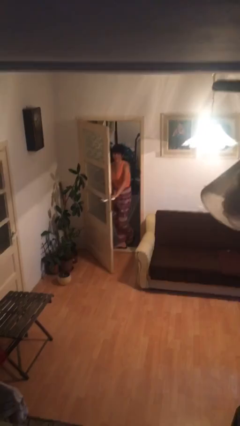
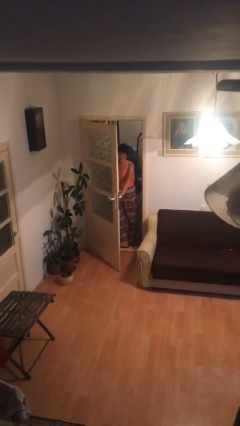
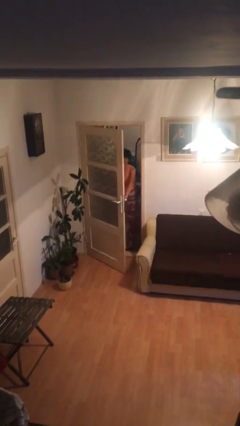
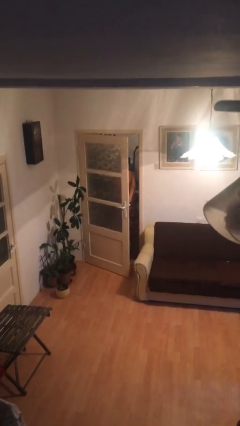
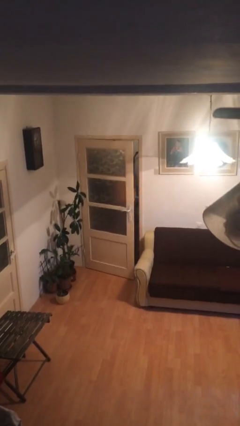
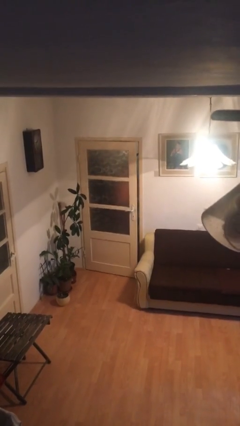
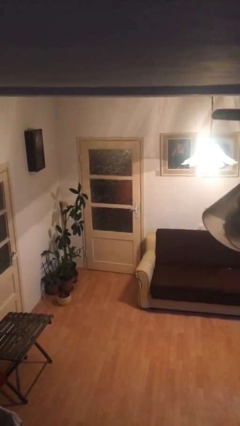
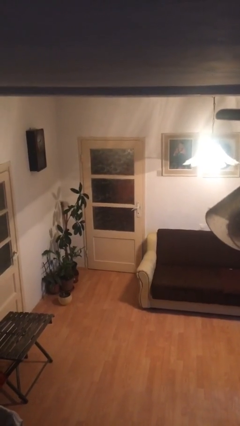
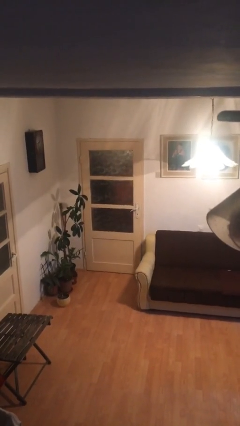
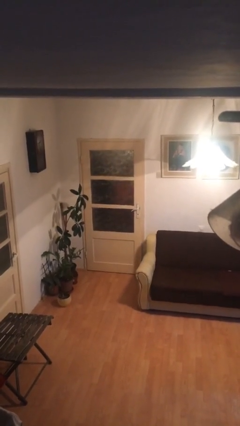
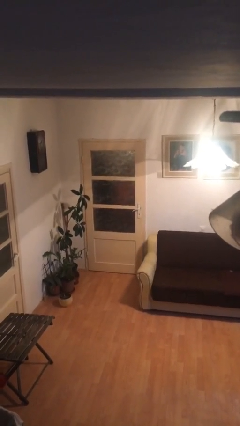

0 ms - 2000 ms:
person closes facility door

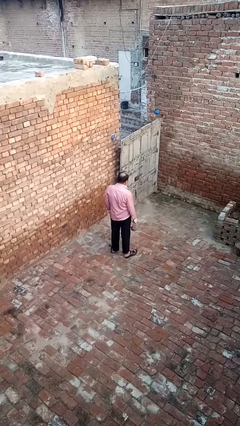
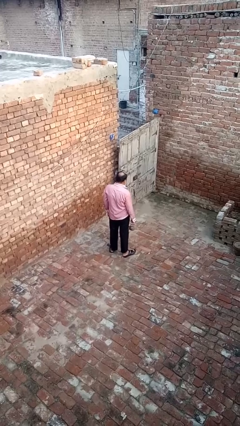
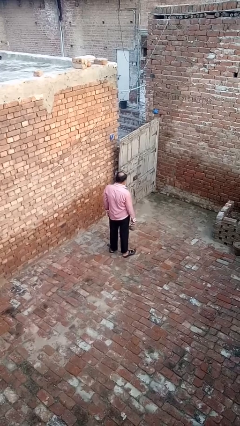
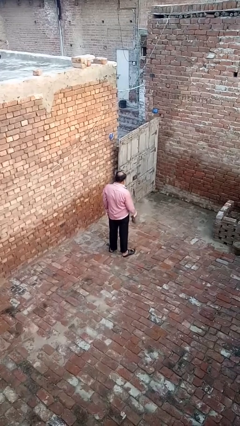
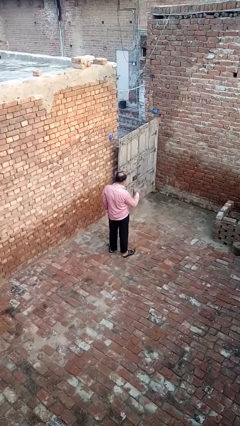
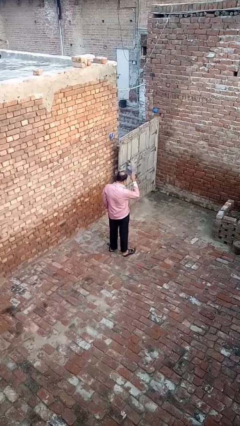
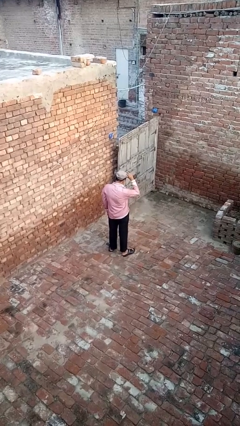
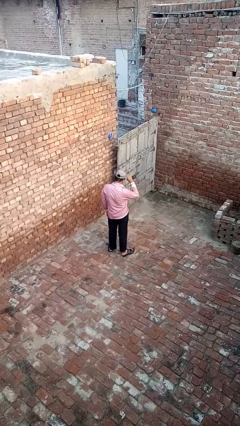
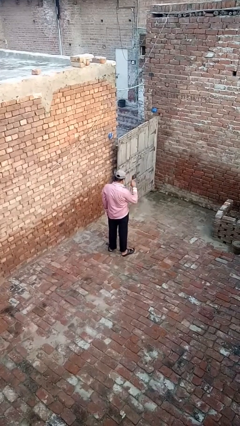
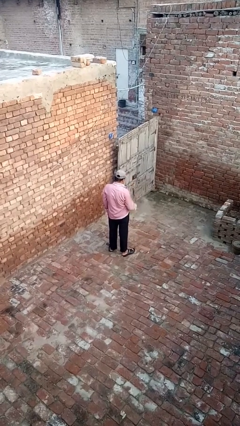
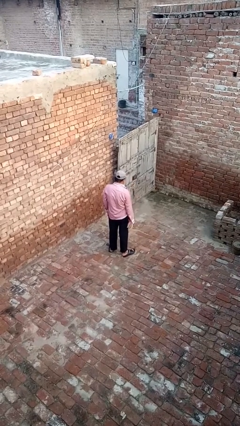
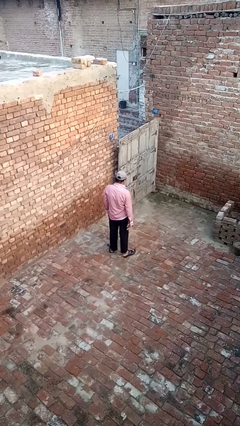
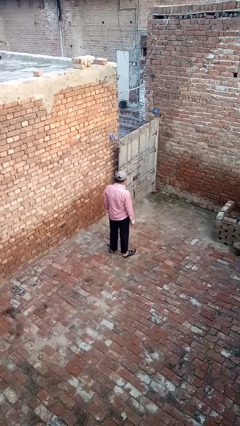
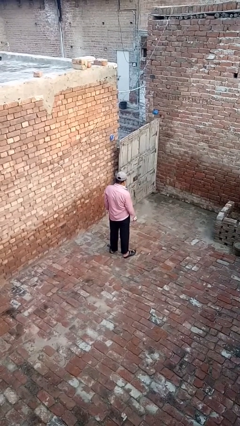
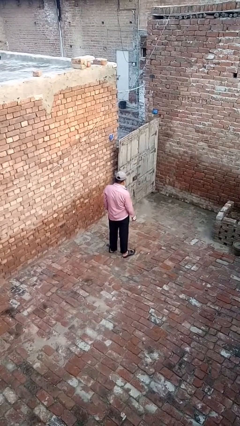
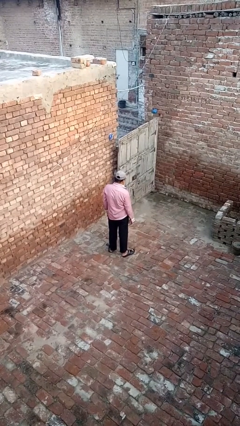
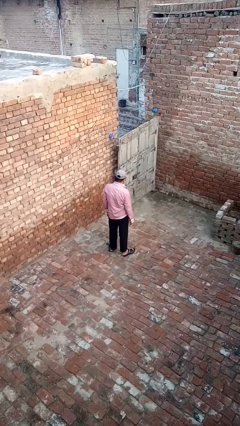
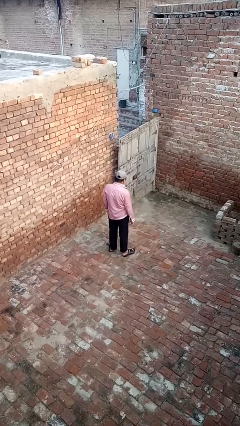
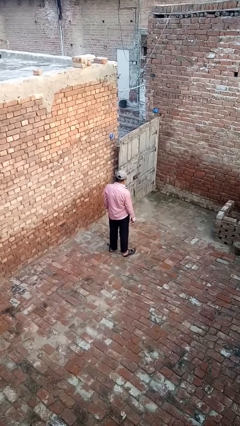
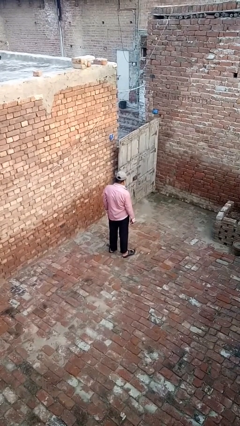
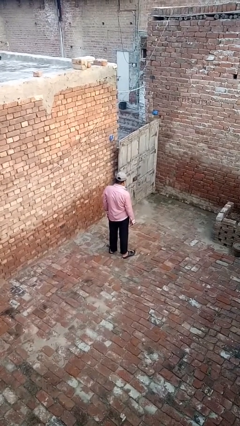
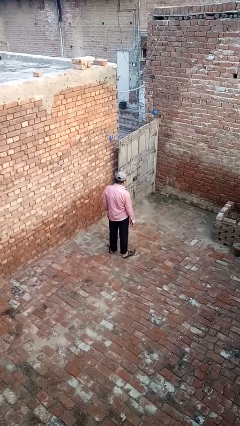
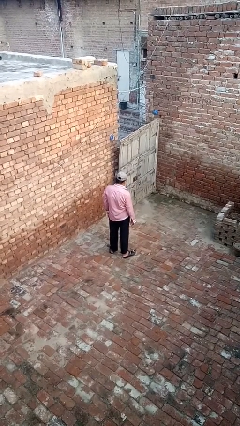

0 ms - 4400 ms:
person puts on hat

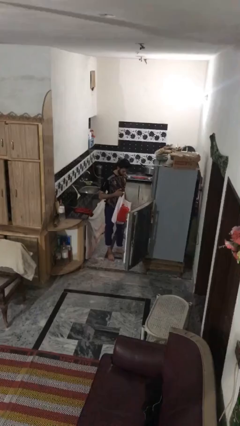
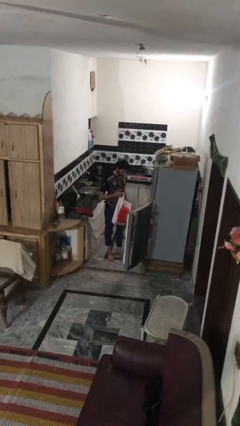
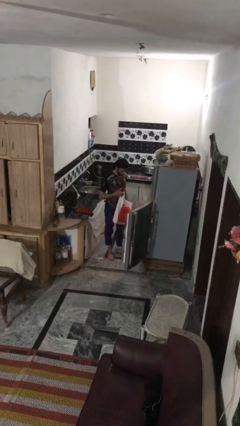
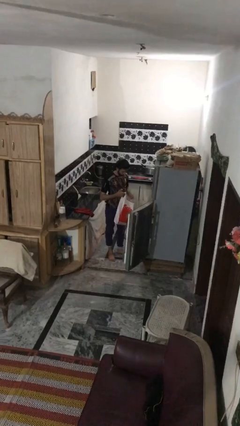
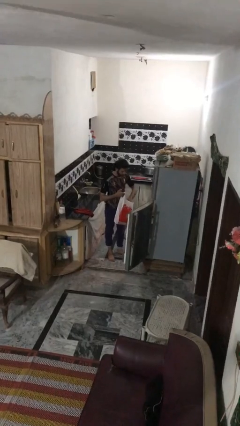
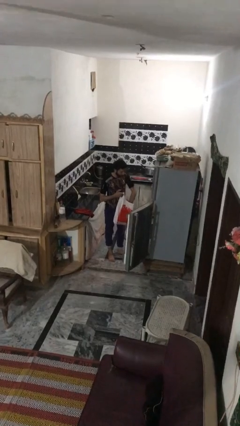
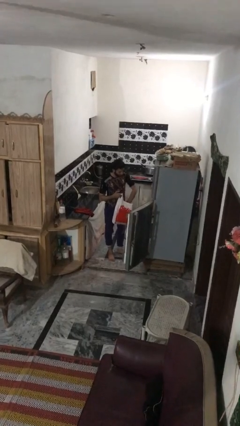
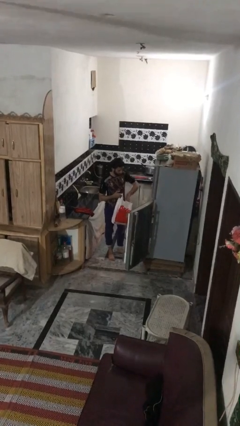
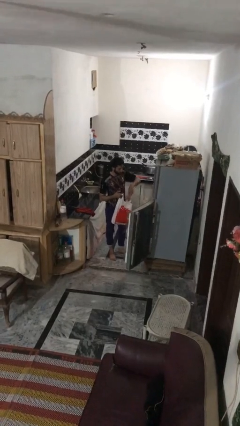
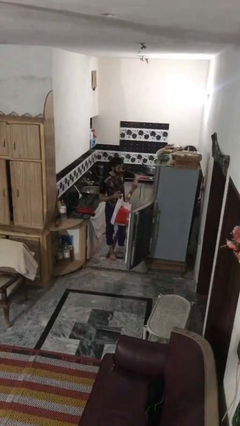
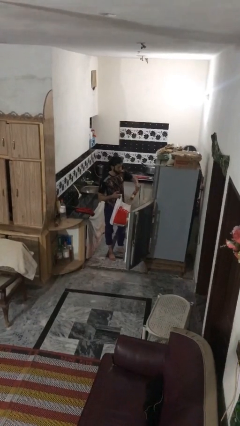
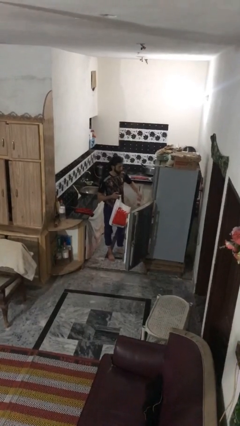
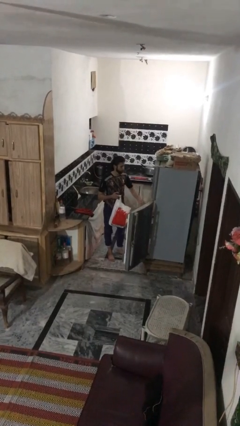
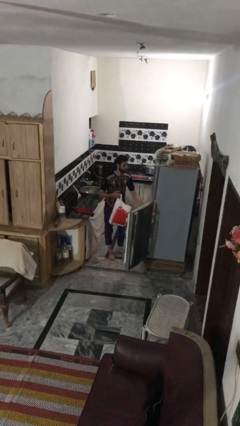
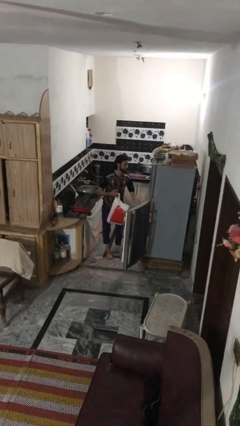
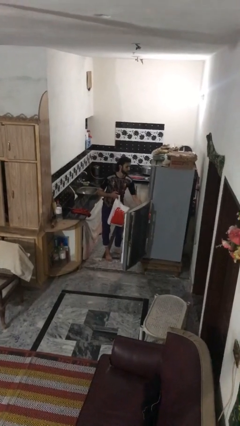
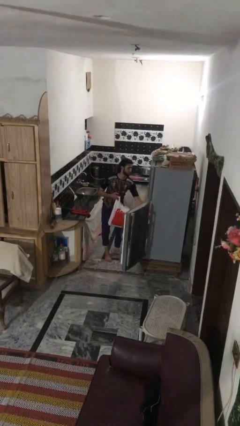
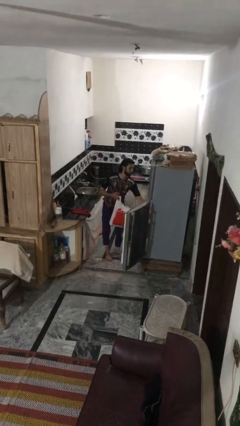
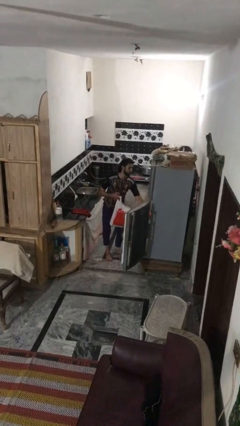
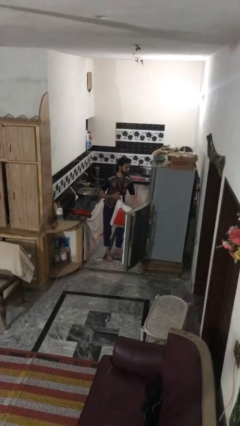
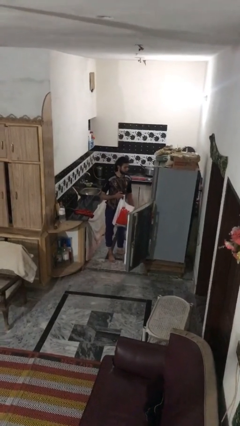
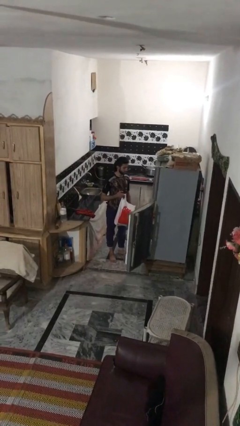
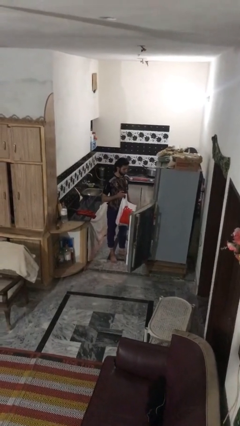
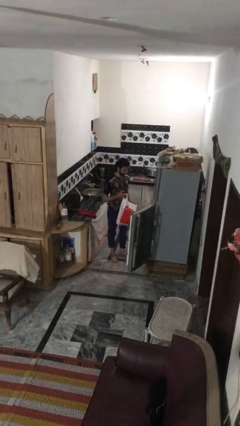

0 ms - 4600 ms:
person loads groceries into refrigerator

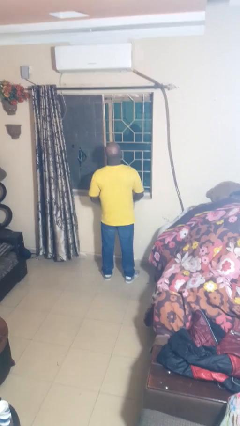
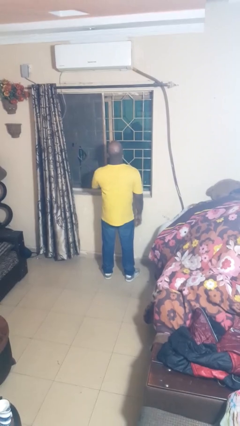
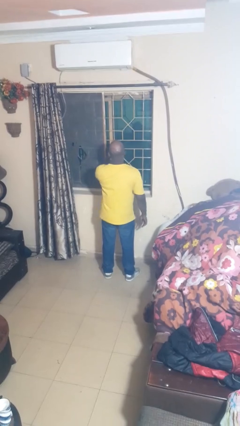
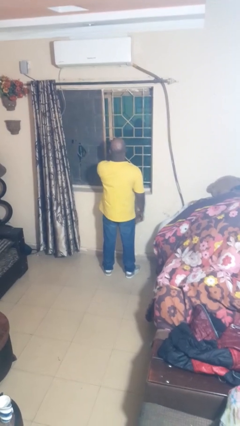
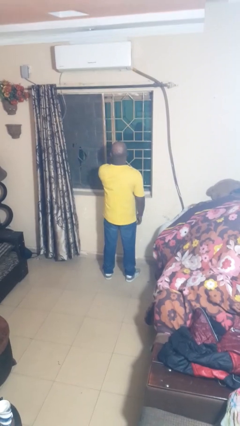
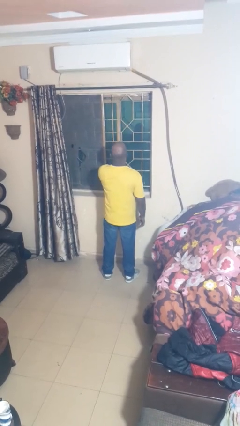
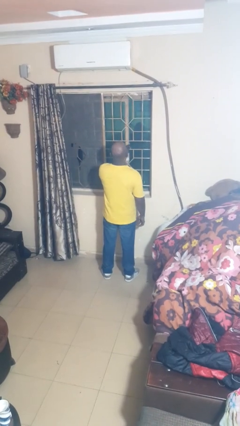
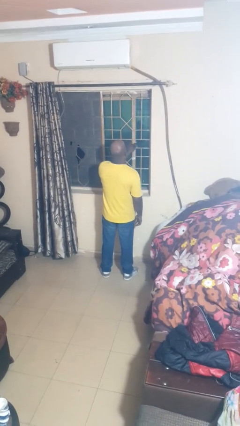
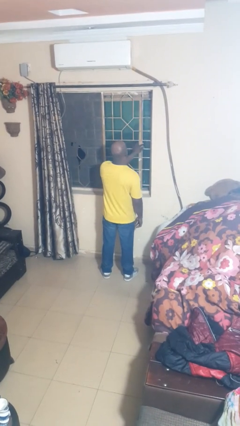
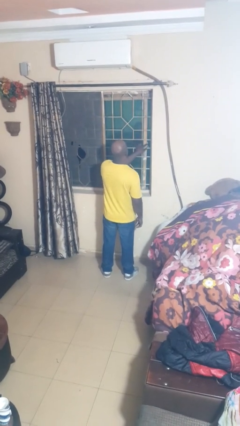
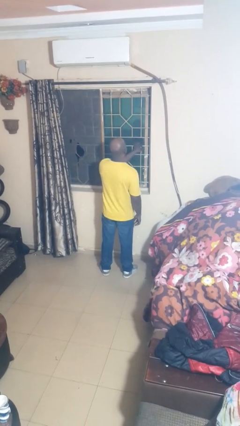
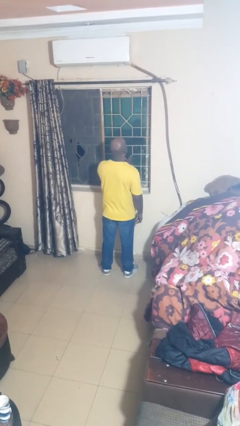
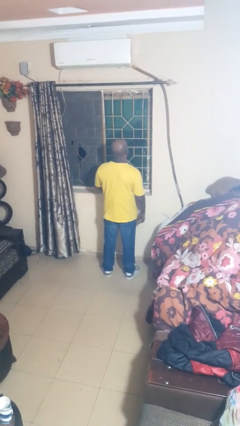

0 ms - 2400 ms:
person closes home window

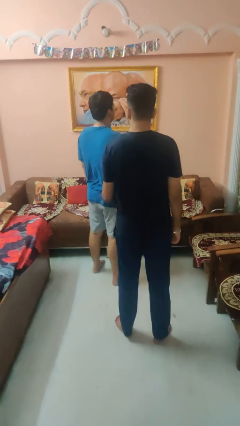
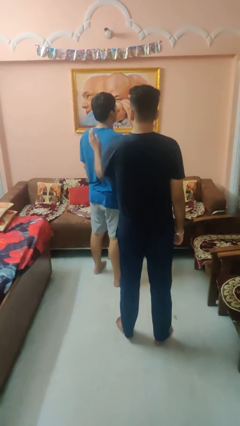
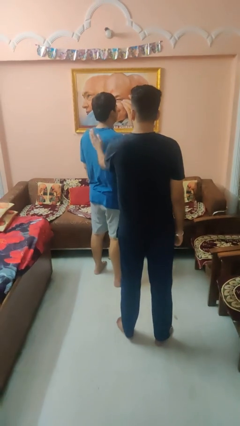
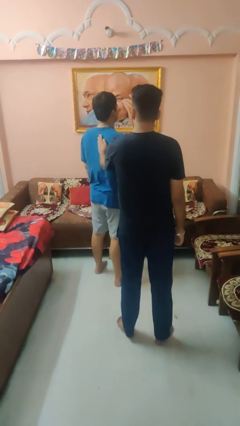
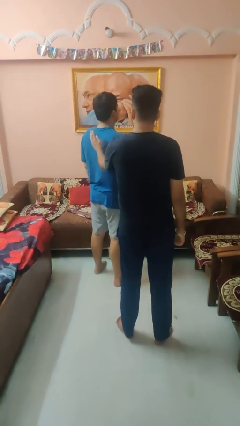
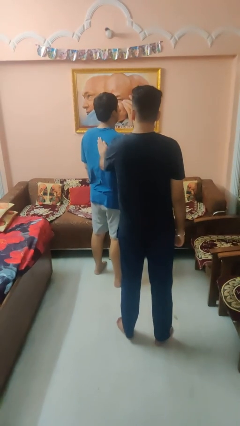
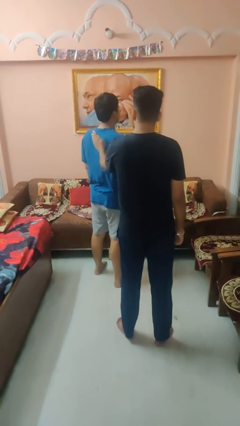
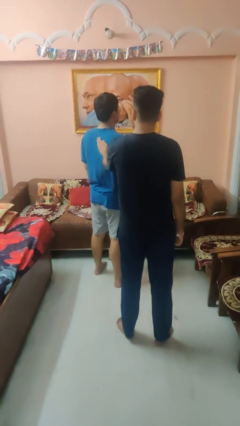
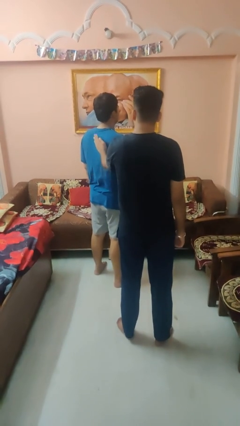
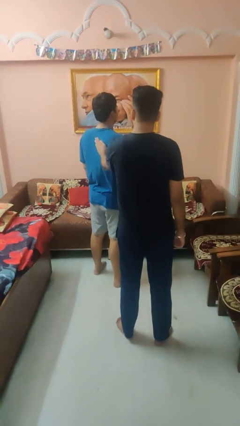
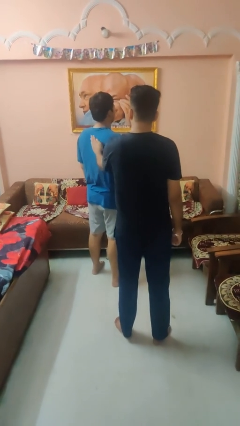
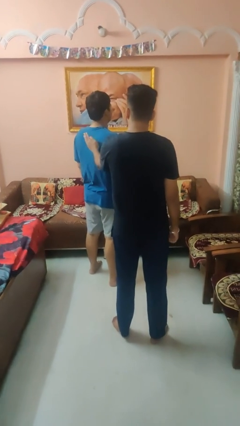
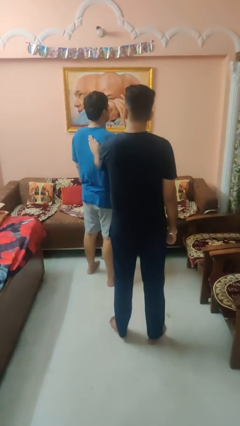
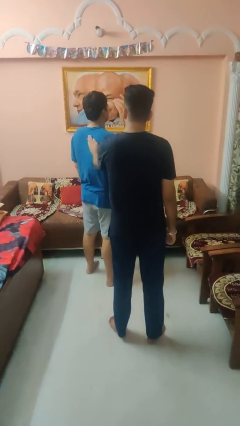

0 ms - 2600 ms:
person touches back of person

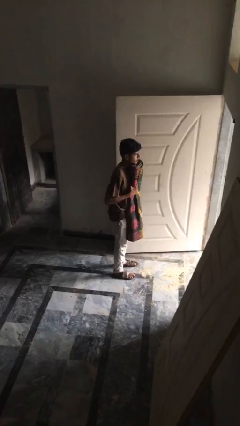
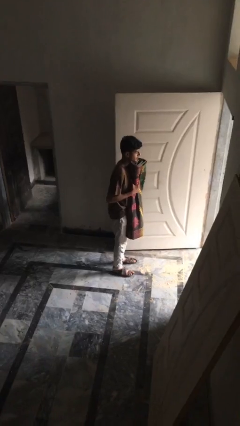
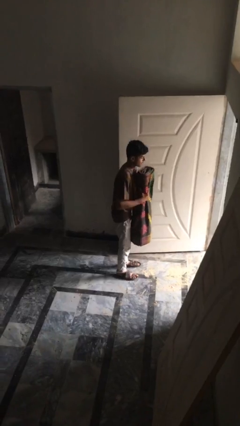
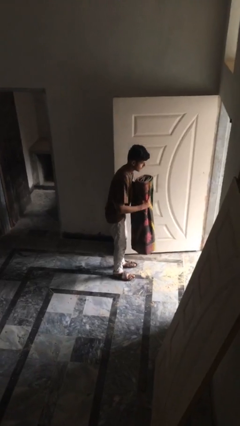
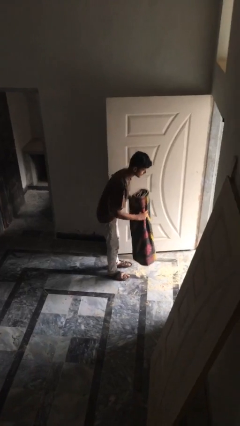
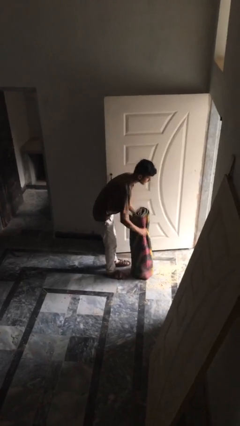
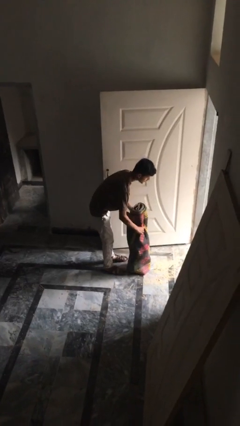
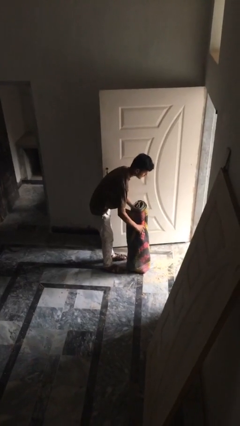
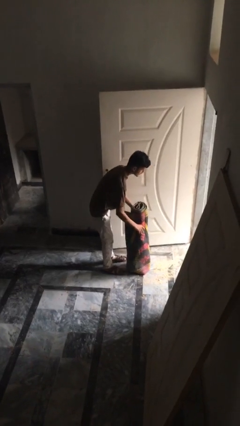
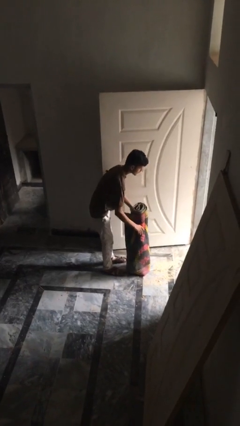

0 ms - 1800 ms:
person puts down object on floor
